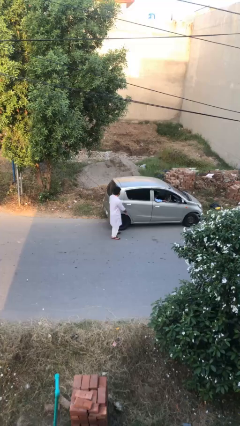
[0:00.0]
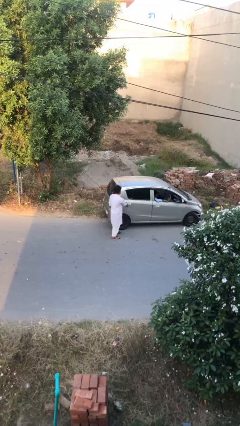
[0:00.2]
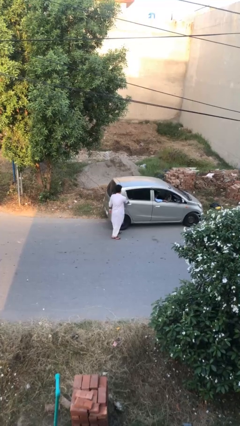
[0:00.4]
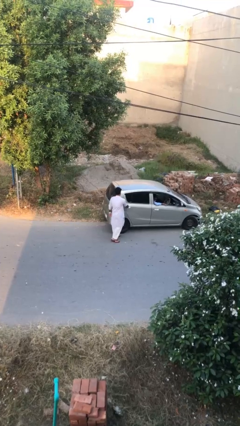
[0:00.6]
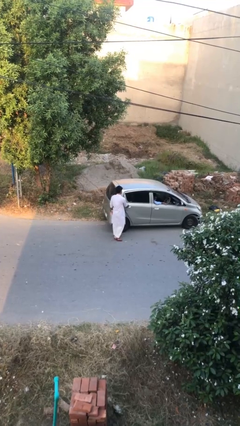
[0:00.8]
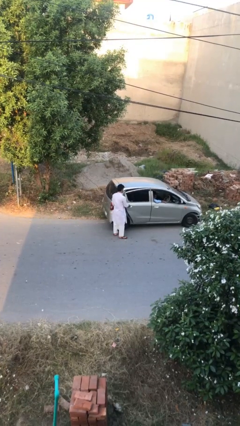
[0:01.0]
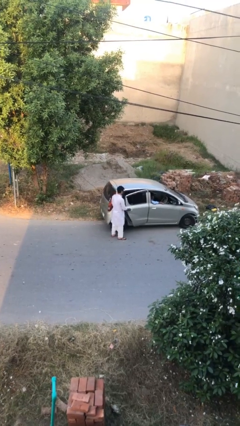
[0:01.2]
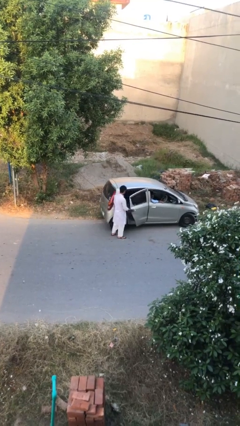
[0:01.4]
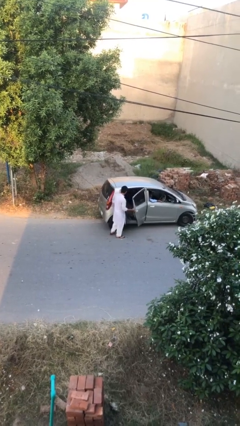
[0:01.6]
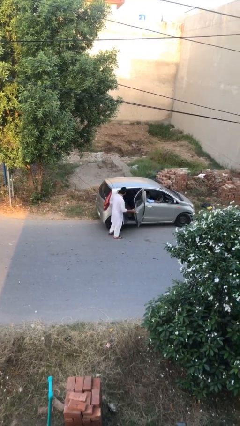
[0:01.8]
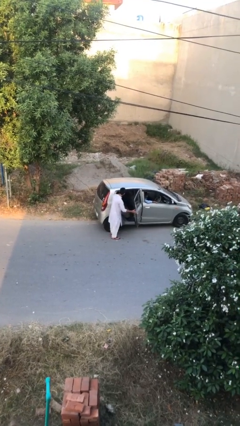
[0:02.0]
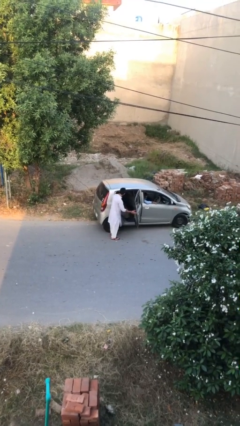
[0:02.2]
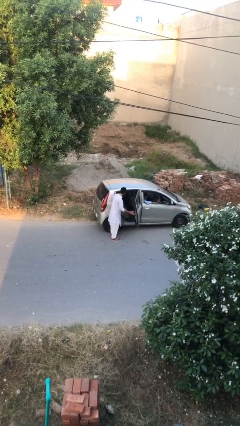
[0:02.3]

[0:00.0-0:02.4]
person opens car door

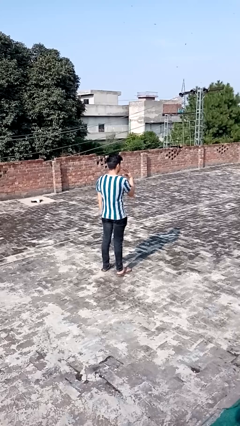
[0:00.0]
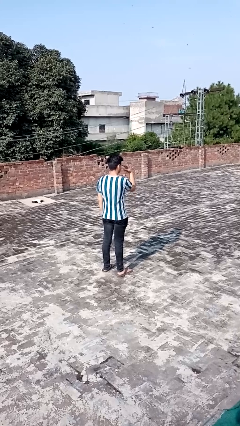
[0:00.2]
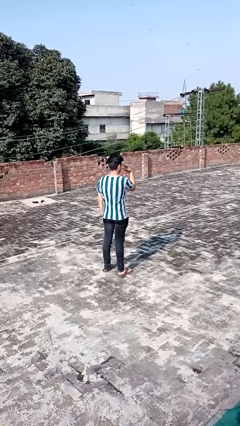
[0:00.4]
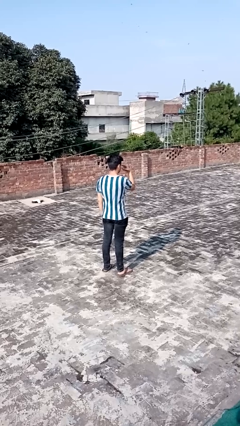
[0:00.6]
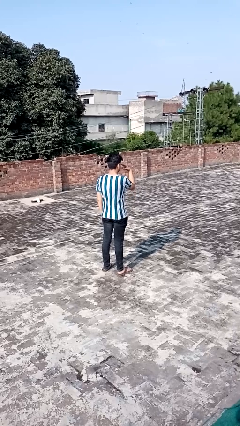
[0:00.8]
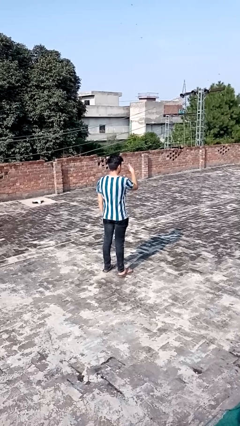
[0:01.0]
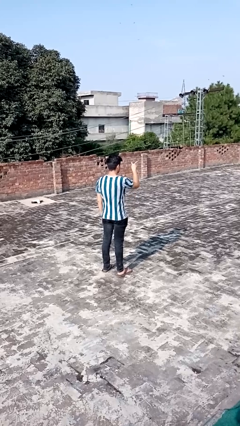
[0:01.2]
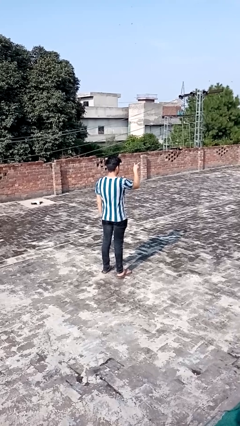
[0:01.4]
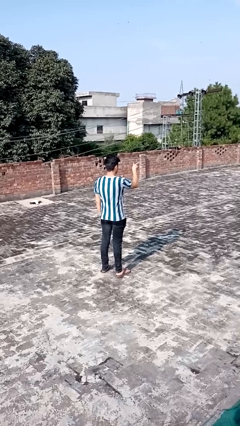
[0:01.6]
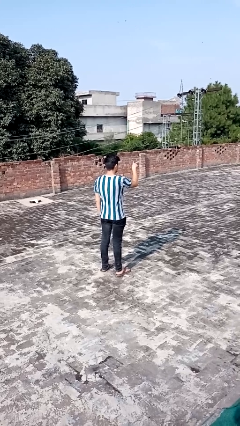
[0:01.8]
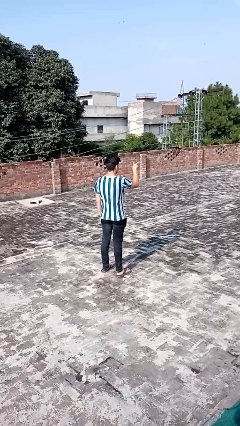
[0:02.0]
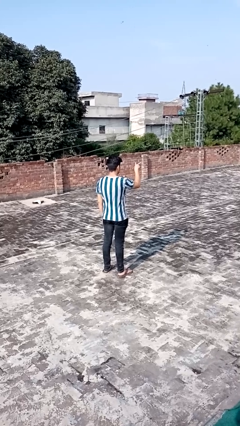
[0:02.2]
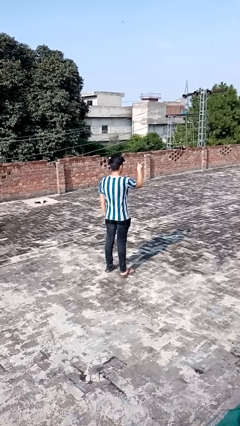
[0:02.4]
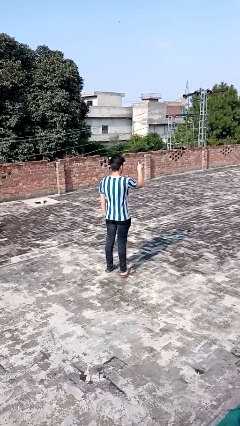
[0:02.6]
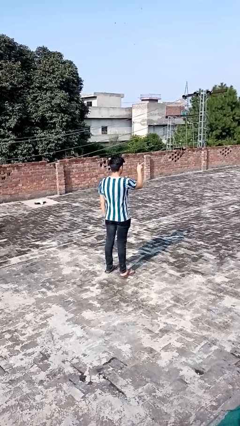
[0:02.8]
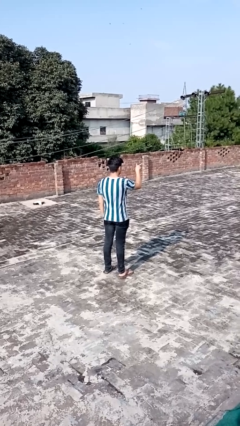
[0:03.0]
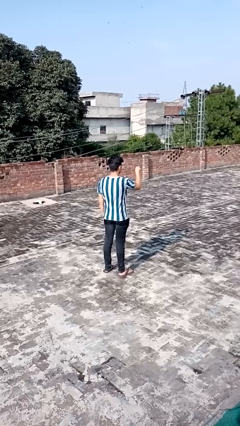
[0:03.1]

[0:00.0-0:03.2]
person gestures watch closely

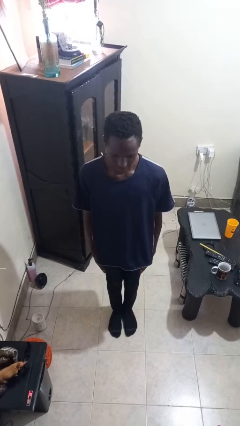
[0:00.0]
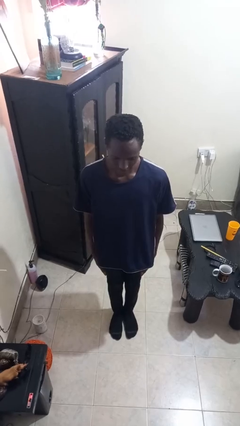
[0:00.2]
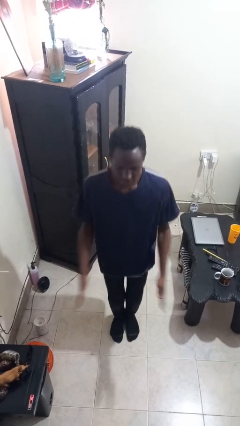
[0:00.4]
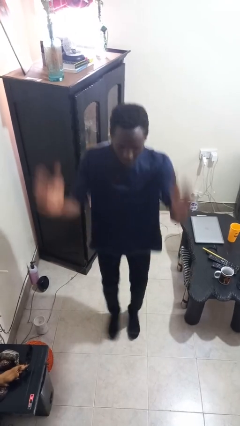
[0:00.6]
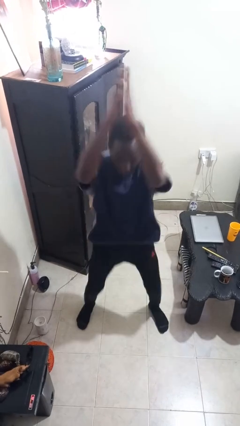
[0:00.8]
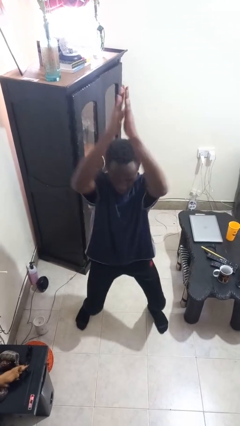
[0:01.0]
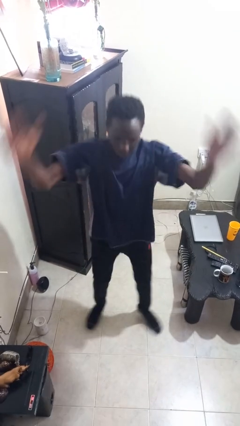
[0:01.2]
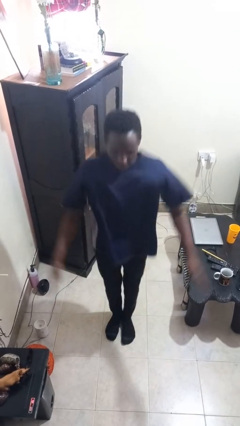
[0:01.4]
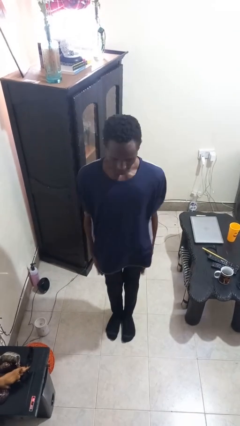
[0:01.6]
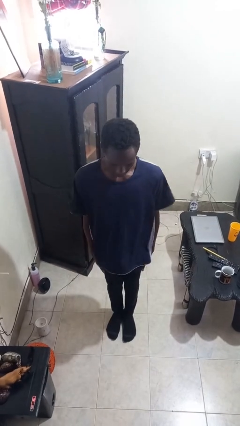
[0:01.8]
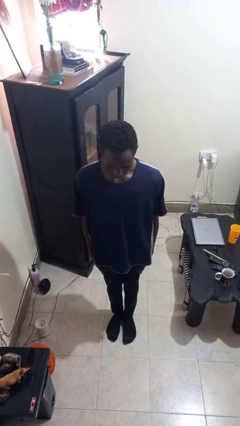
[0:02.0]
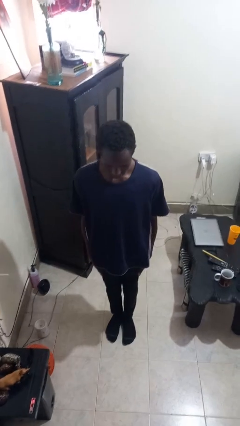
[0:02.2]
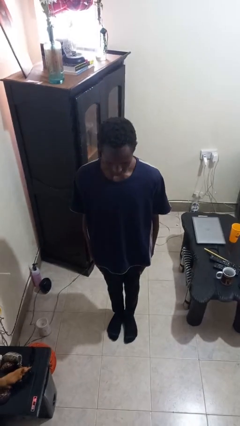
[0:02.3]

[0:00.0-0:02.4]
person exercises with jumping jacks

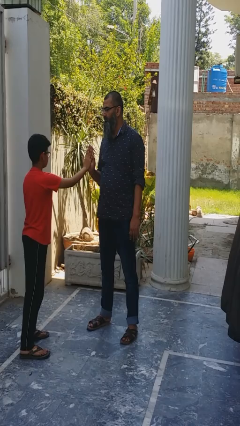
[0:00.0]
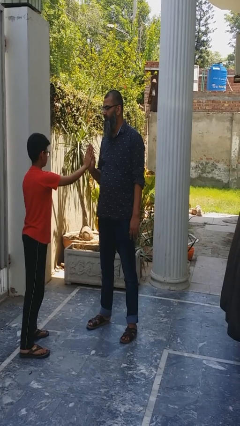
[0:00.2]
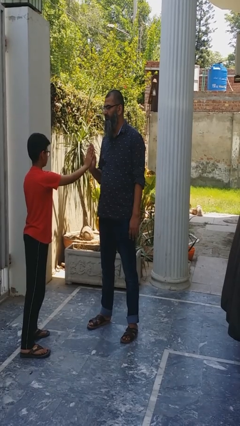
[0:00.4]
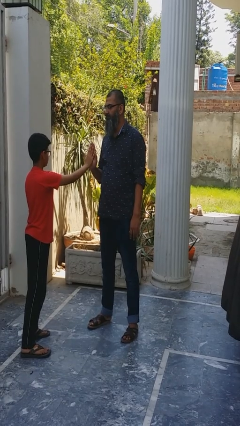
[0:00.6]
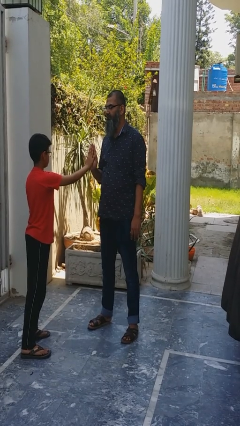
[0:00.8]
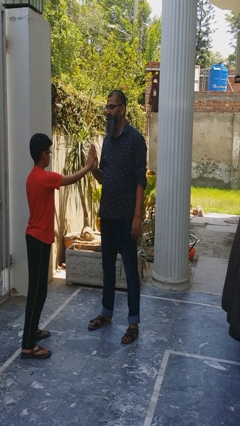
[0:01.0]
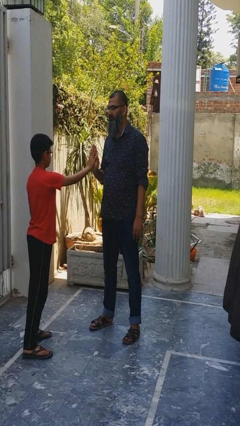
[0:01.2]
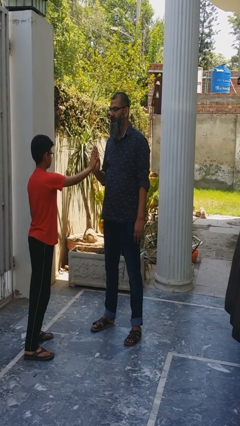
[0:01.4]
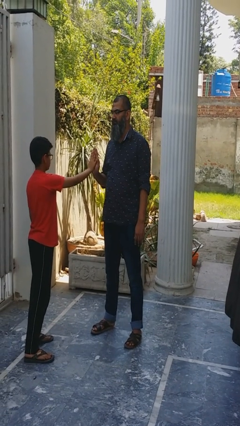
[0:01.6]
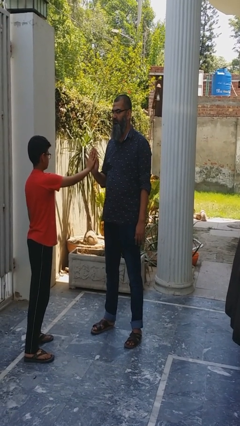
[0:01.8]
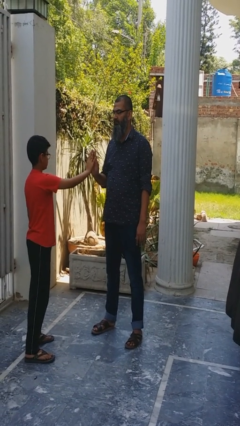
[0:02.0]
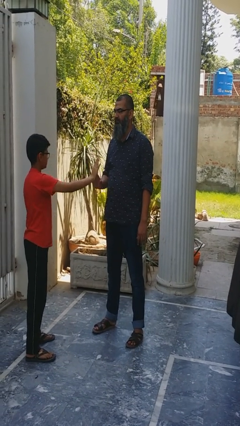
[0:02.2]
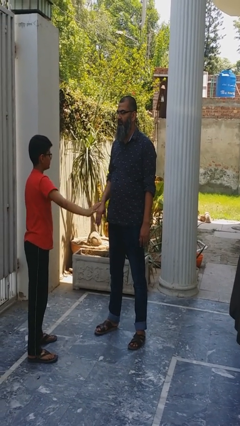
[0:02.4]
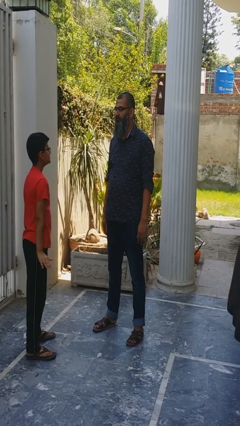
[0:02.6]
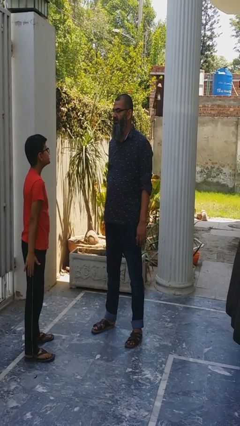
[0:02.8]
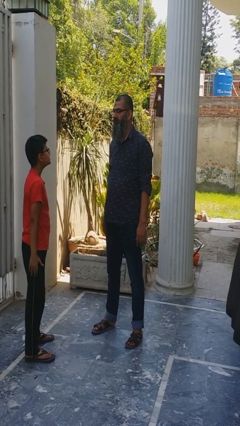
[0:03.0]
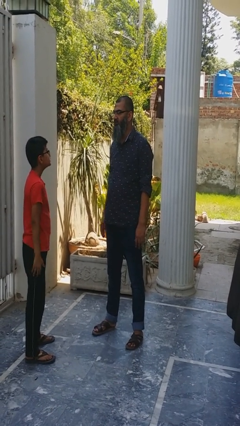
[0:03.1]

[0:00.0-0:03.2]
person highfives hand

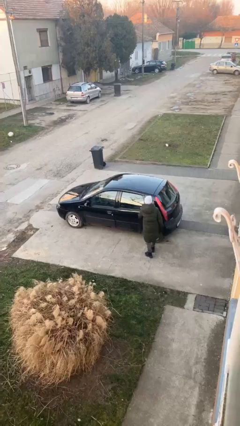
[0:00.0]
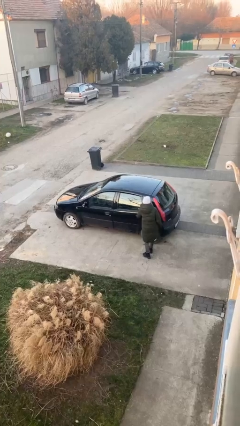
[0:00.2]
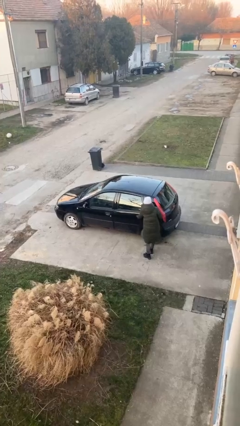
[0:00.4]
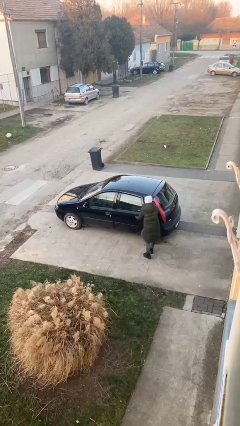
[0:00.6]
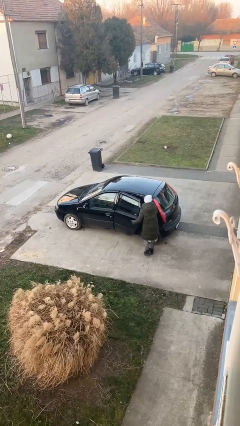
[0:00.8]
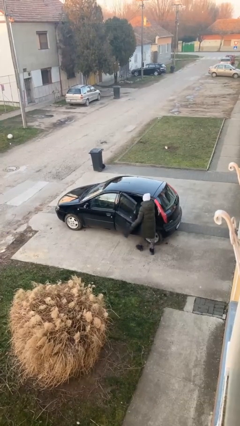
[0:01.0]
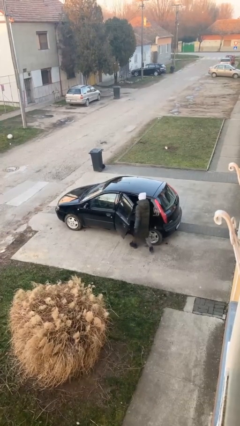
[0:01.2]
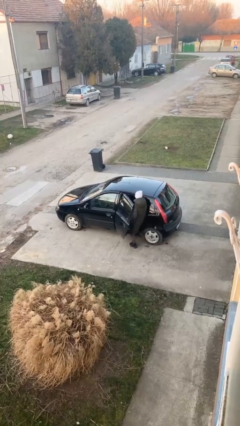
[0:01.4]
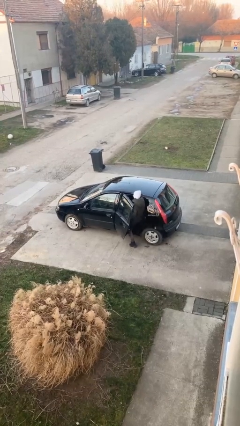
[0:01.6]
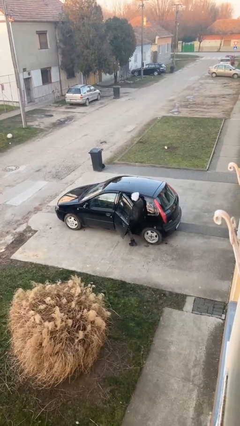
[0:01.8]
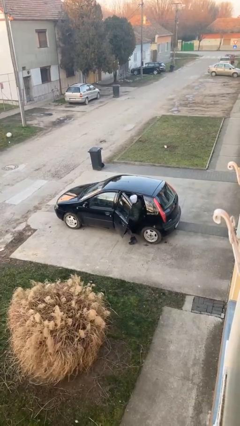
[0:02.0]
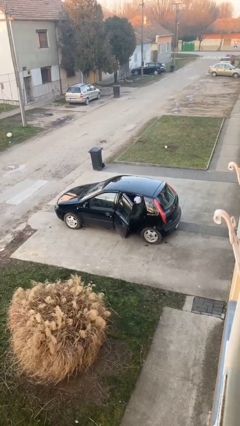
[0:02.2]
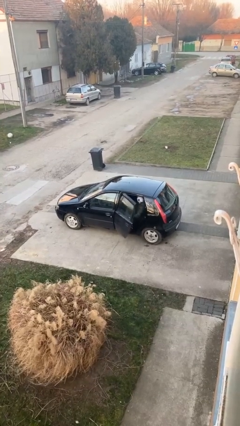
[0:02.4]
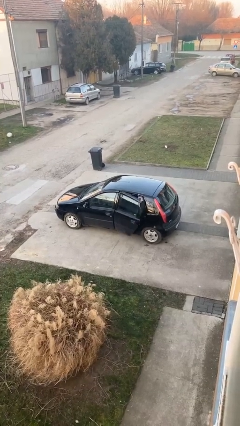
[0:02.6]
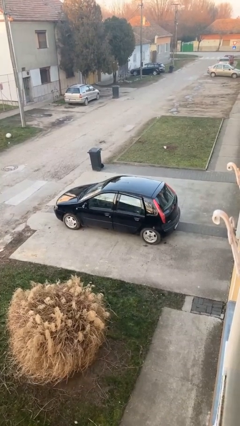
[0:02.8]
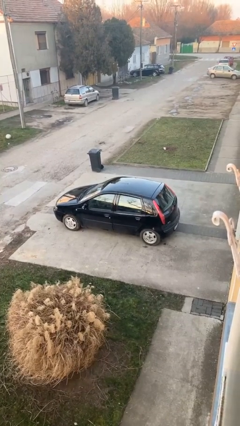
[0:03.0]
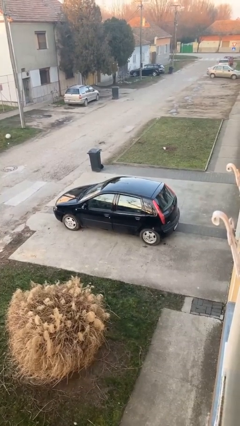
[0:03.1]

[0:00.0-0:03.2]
car picks up person

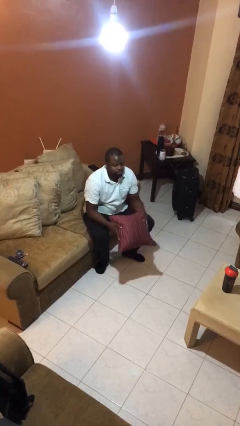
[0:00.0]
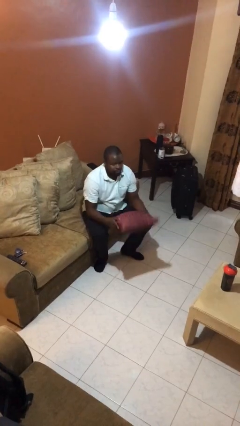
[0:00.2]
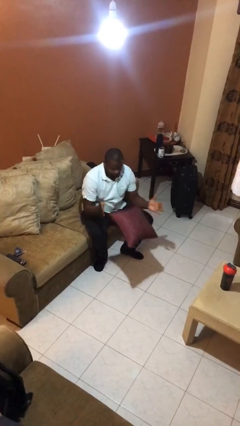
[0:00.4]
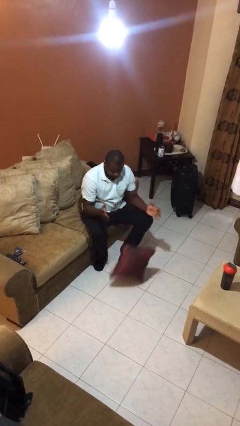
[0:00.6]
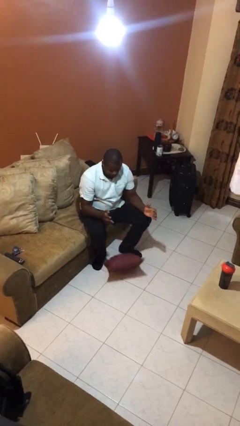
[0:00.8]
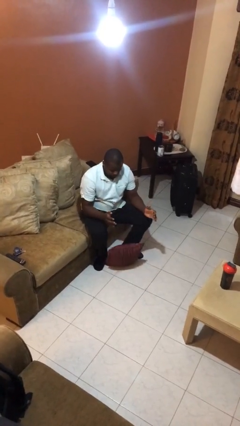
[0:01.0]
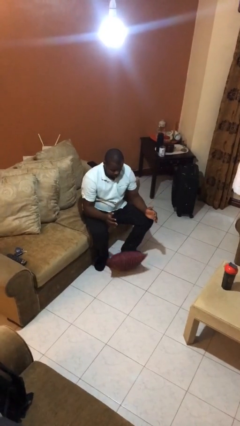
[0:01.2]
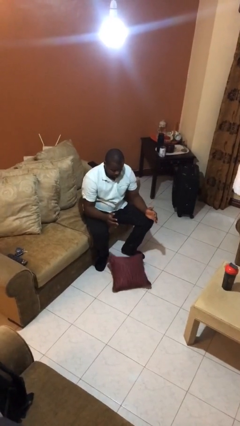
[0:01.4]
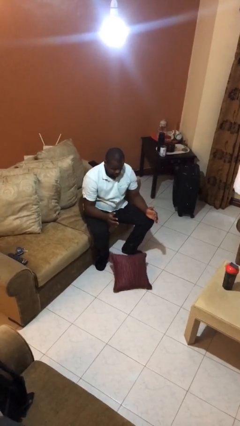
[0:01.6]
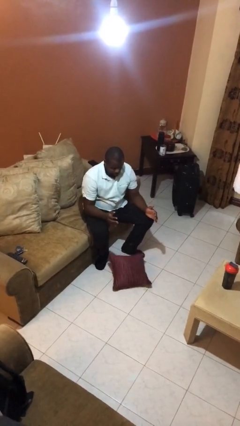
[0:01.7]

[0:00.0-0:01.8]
person drops object

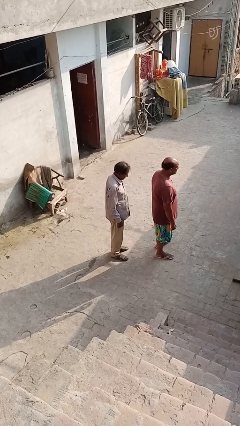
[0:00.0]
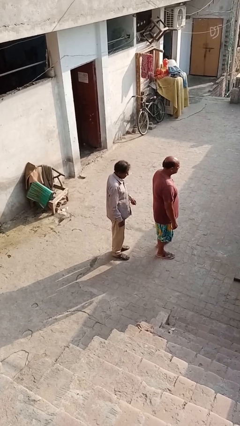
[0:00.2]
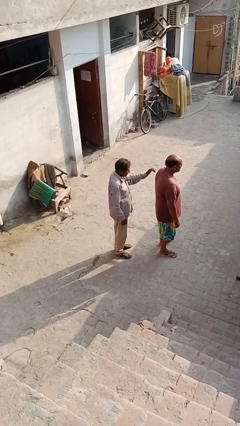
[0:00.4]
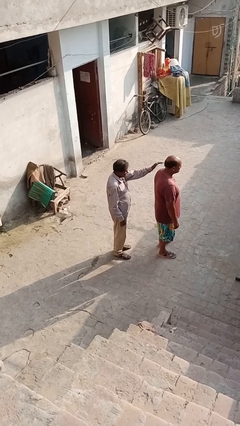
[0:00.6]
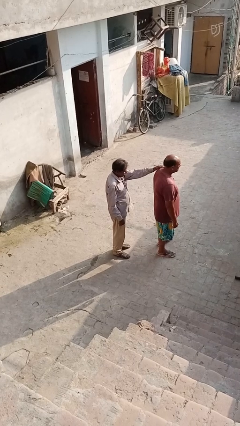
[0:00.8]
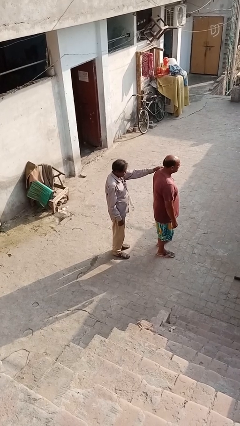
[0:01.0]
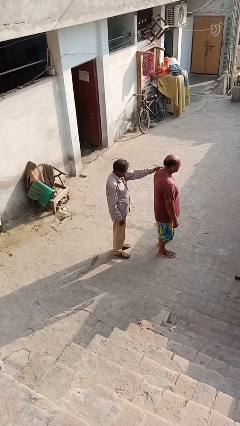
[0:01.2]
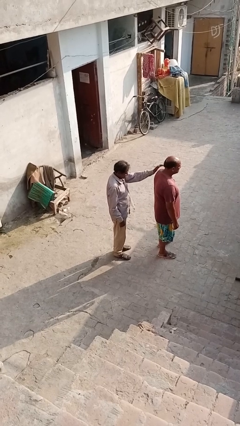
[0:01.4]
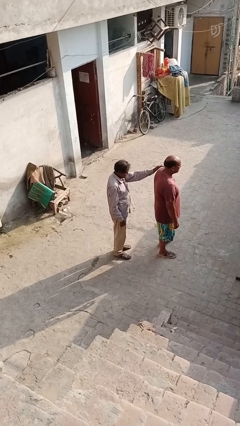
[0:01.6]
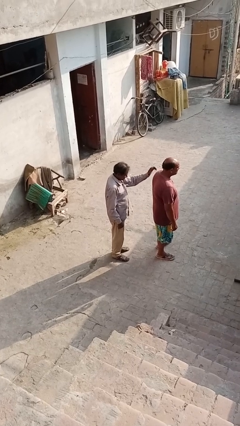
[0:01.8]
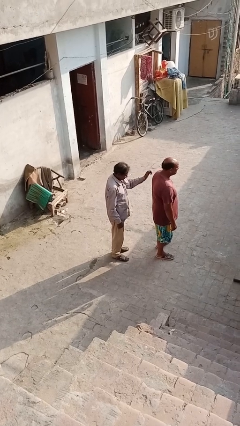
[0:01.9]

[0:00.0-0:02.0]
person touches back of person
